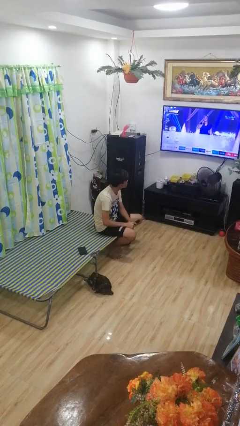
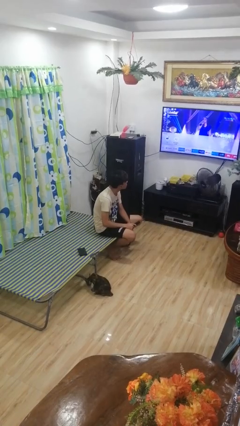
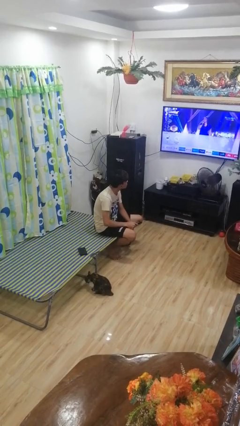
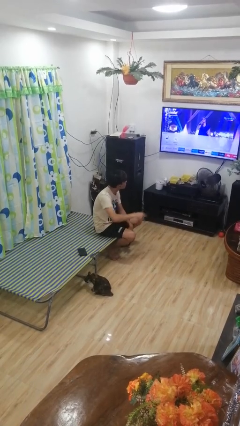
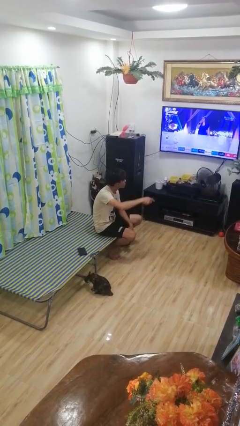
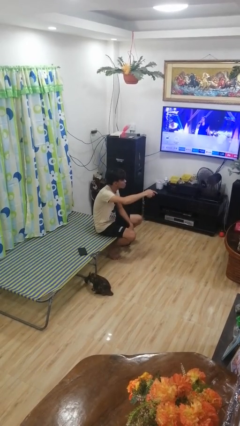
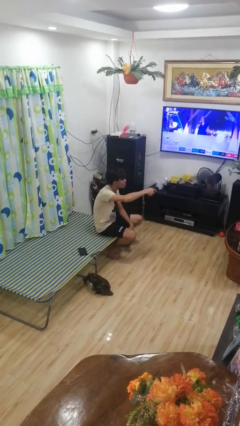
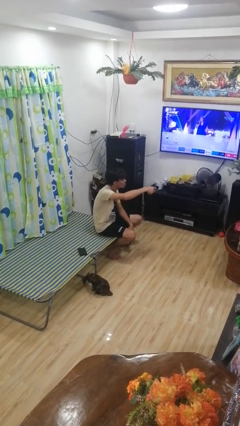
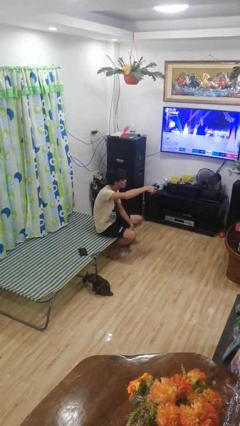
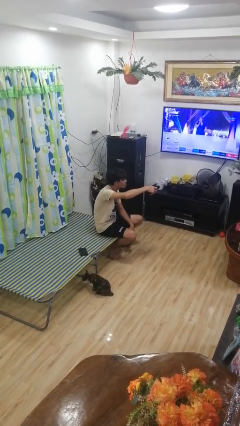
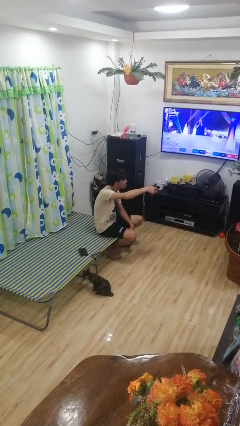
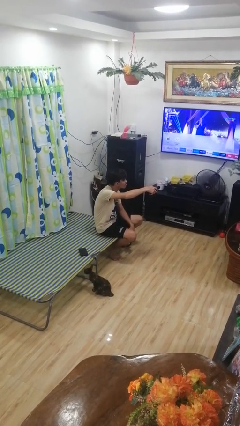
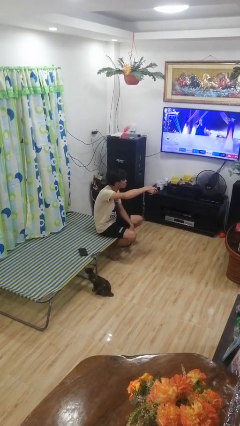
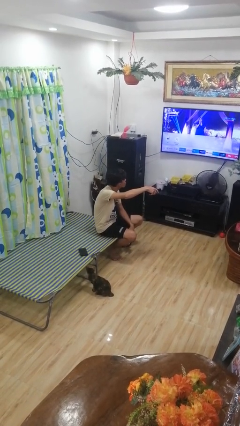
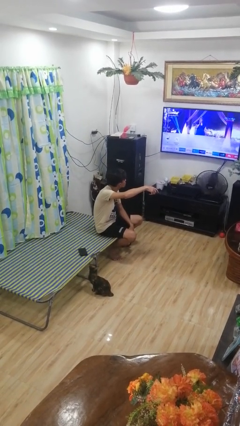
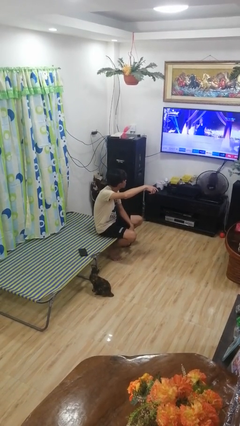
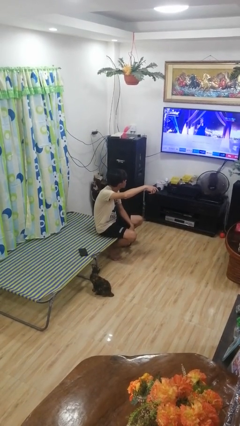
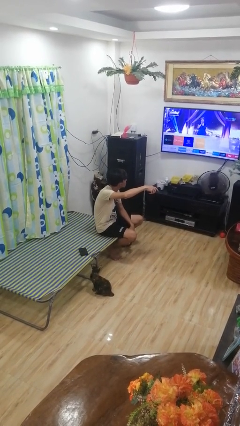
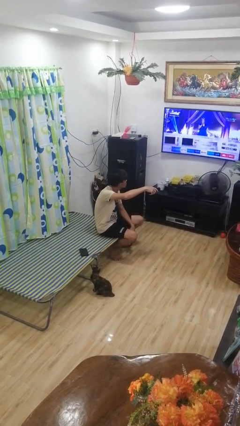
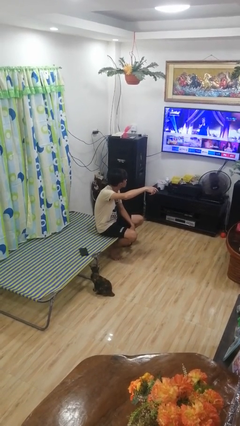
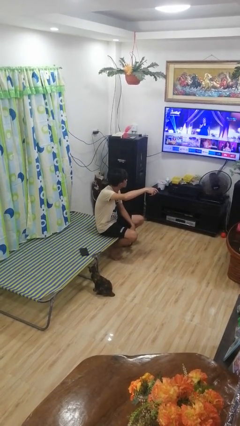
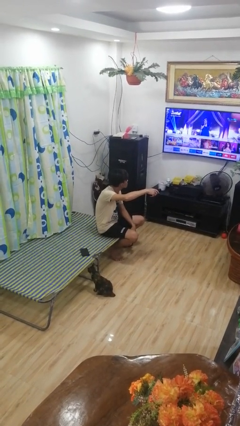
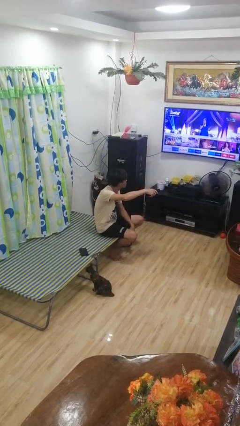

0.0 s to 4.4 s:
person uses television remote

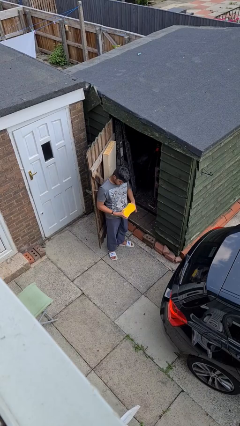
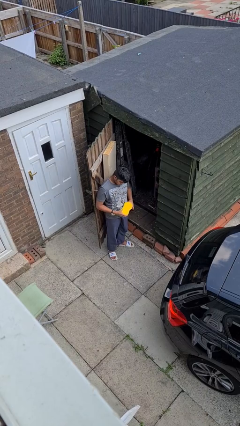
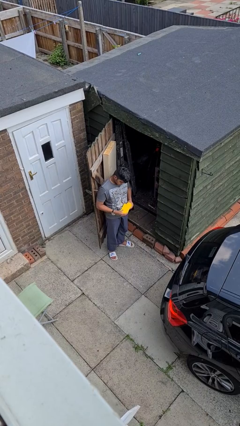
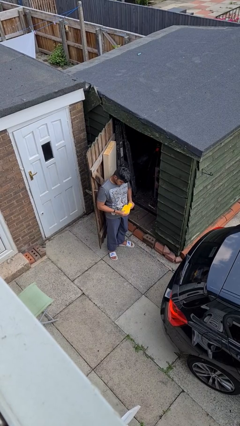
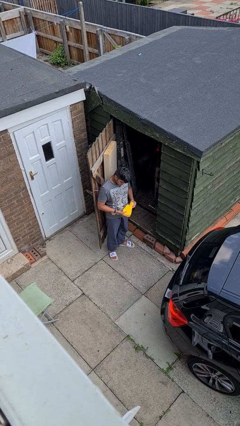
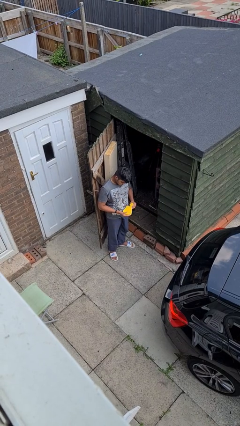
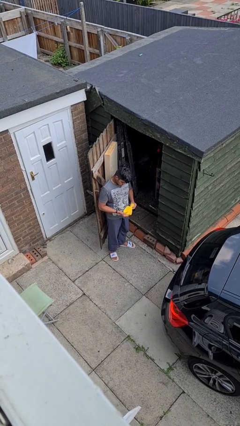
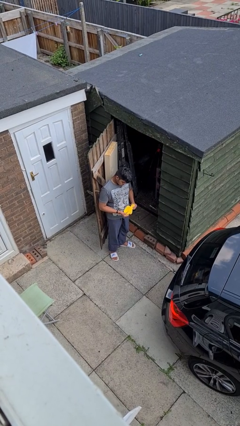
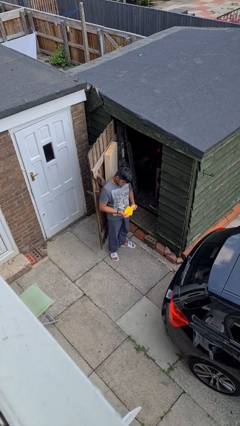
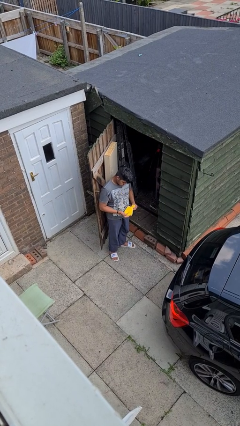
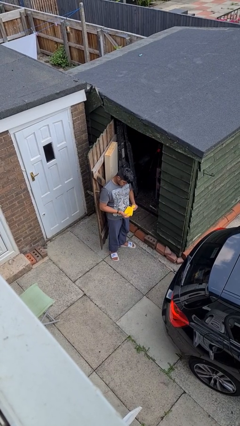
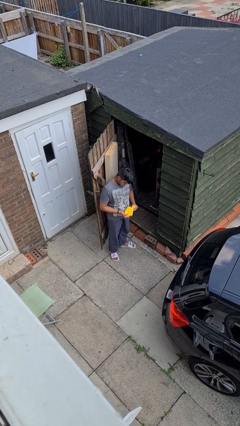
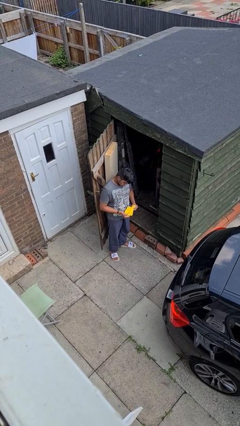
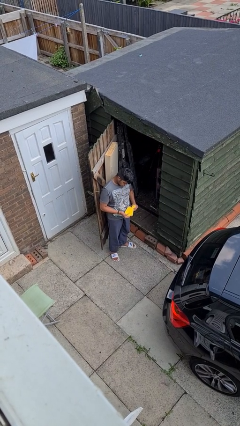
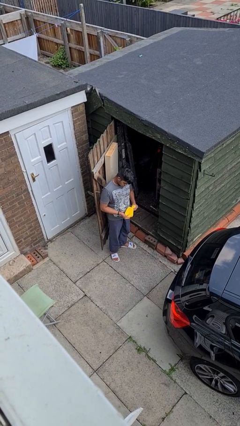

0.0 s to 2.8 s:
person squeezes object

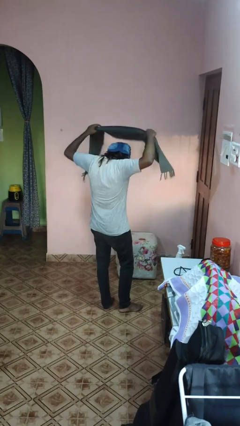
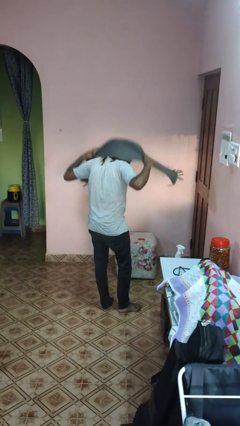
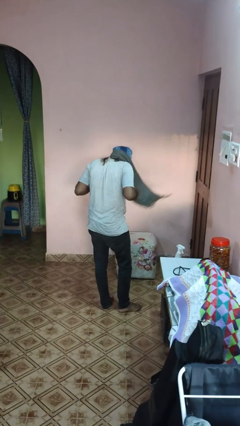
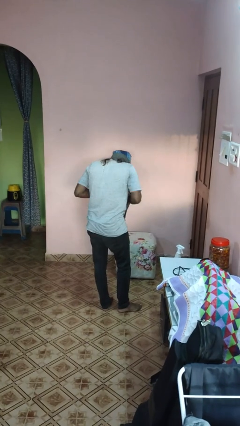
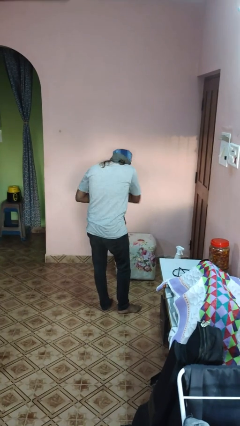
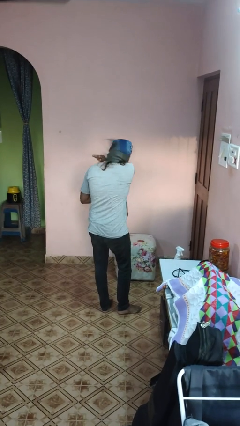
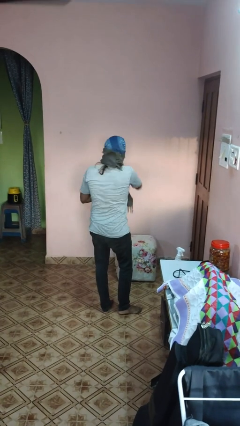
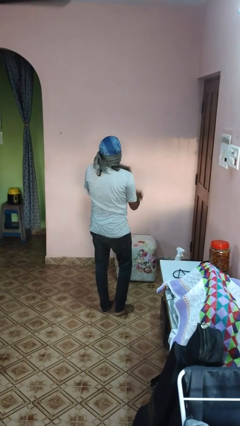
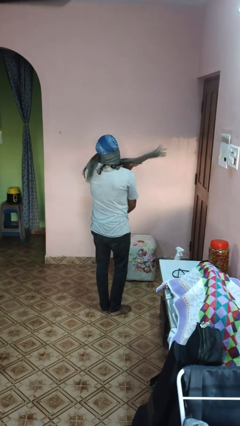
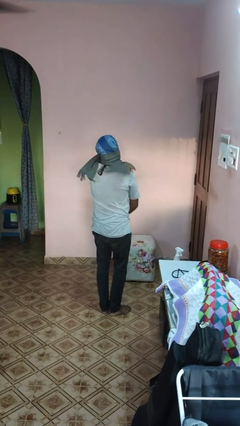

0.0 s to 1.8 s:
person puts on scarf

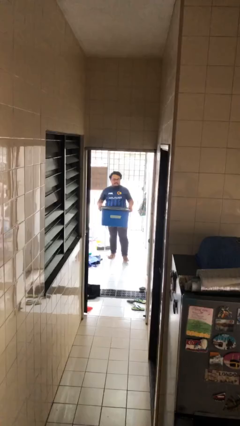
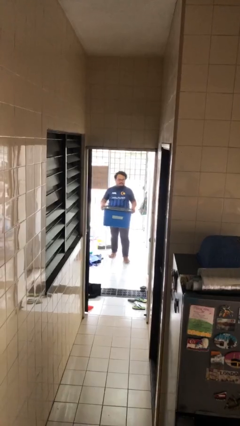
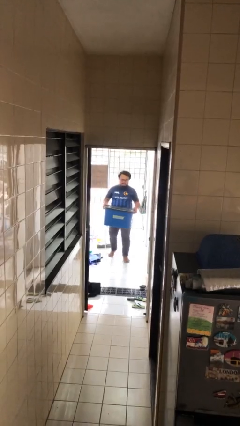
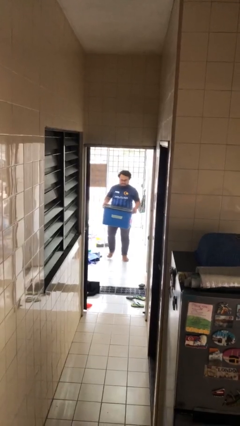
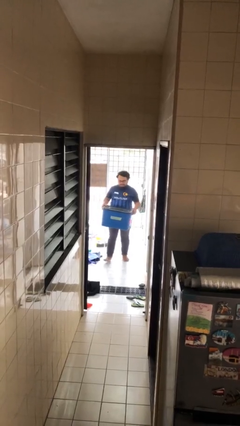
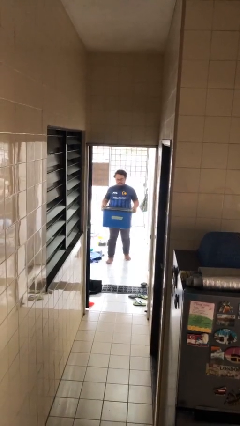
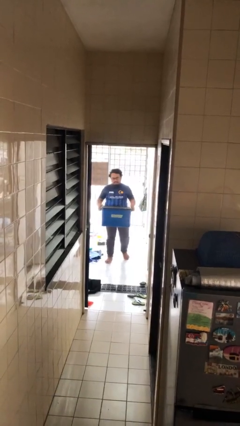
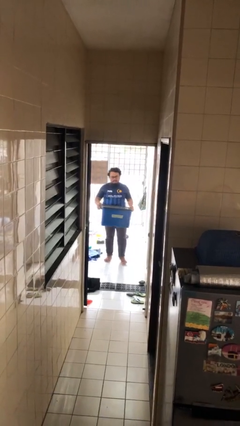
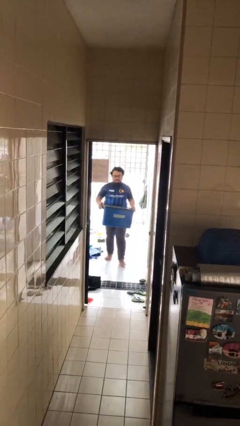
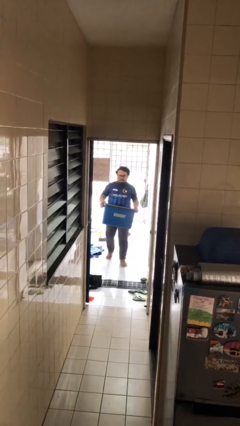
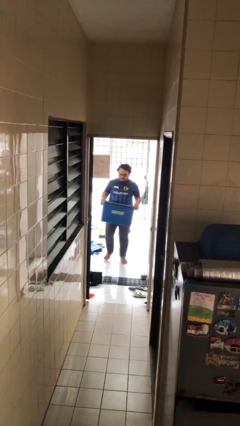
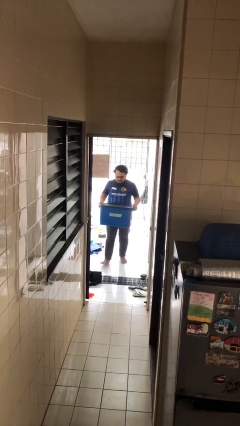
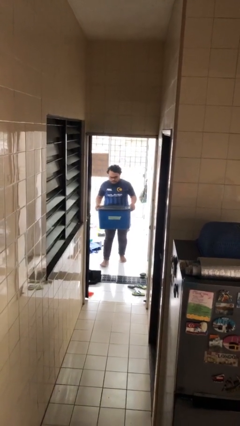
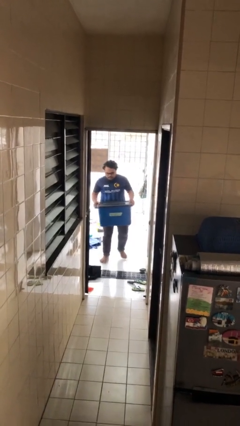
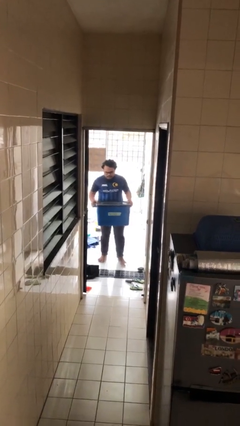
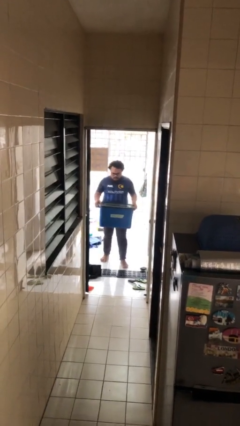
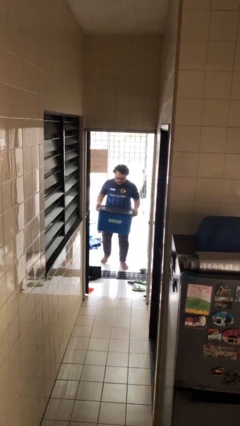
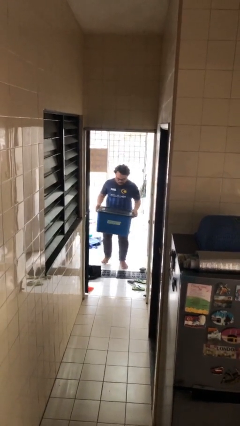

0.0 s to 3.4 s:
person carries heavy object

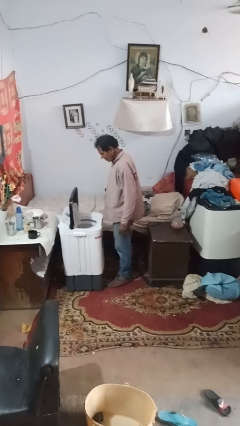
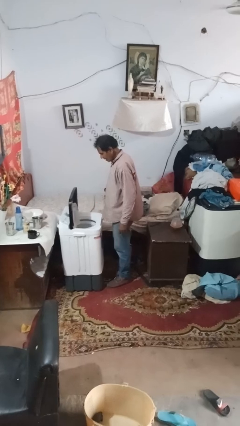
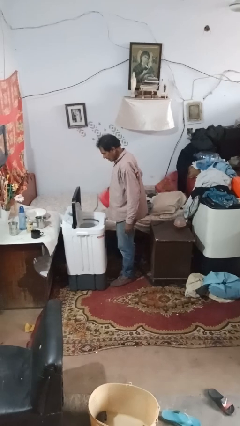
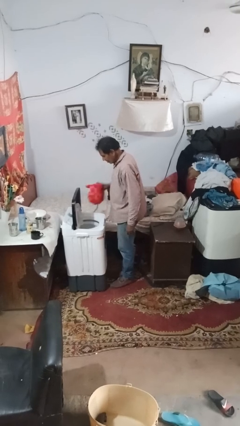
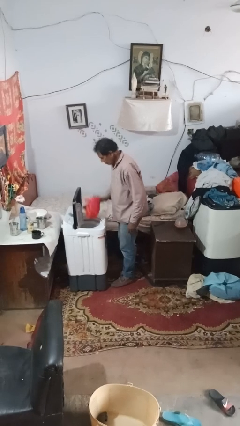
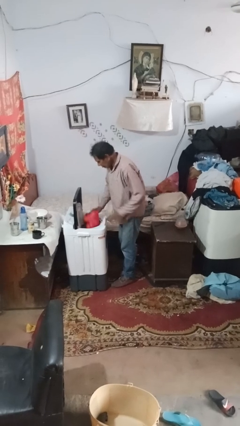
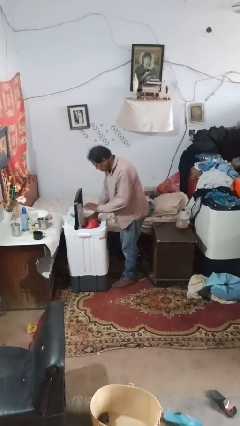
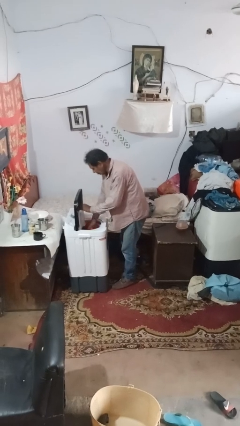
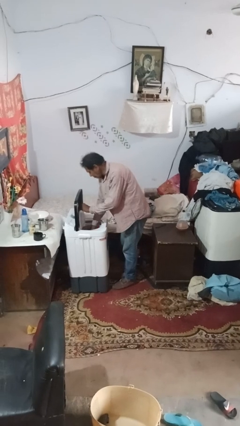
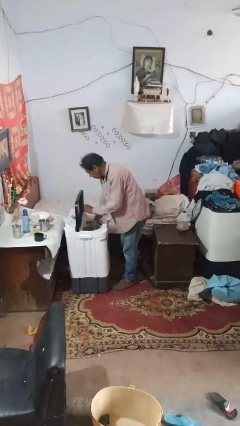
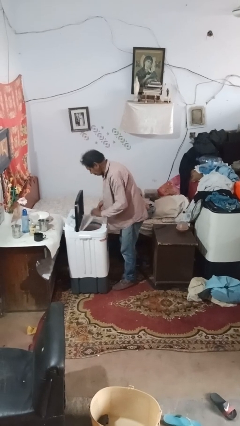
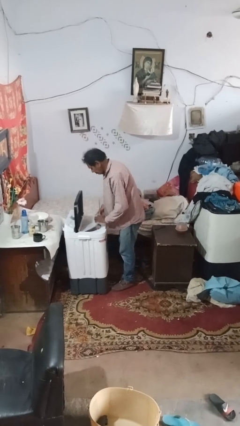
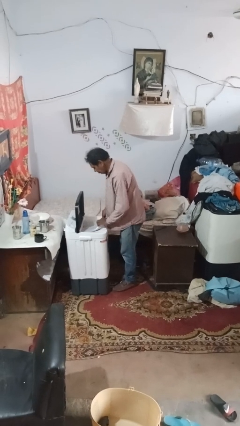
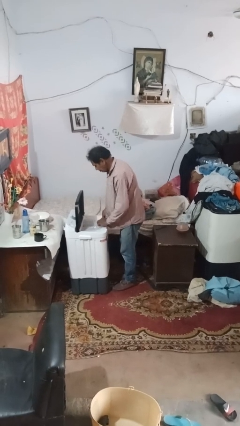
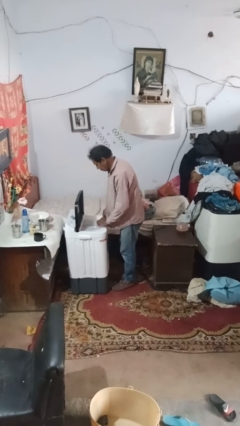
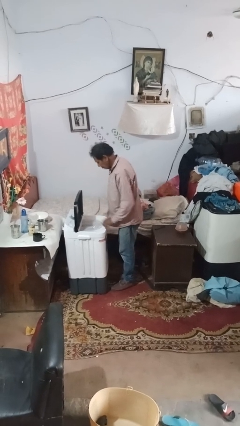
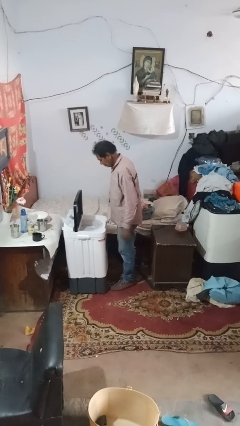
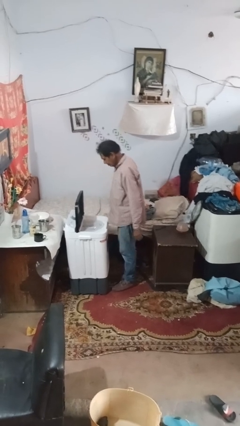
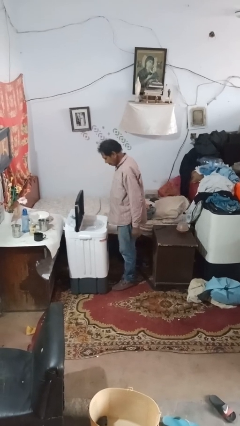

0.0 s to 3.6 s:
person loads dryer

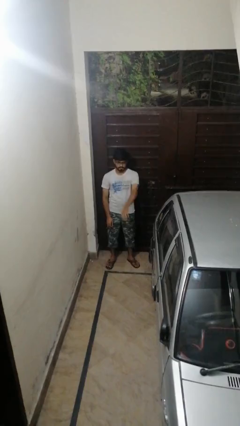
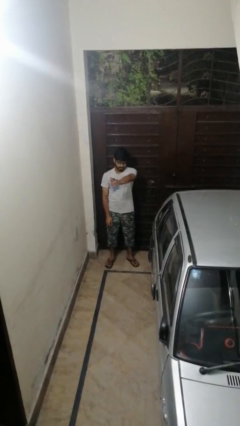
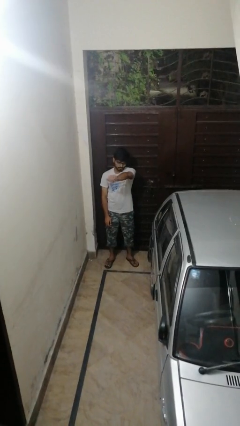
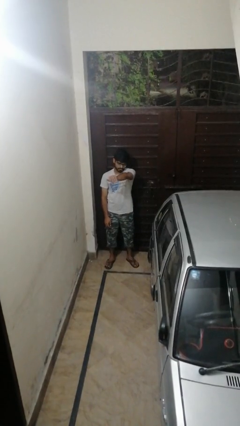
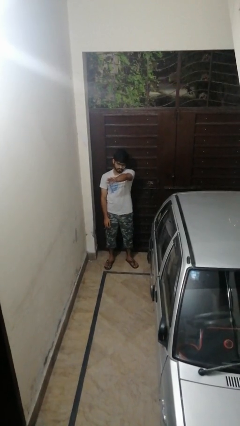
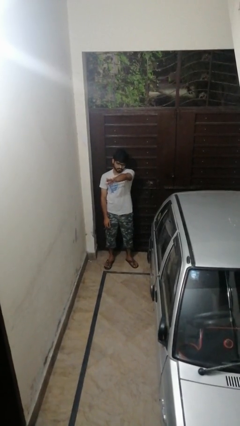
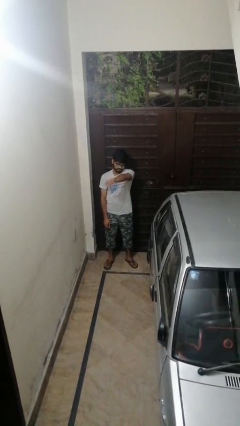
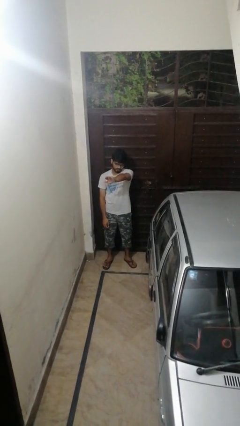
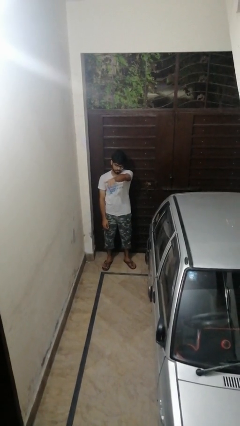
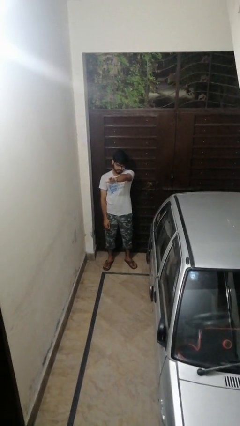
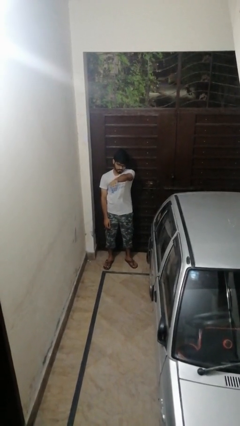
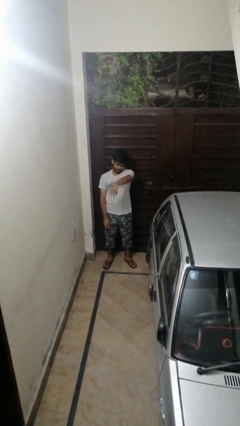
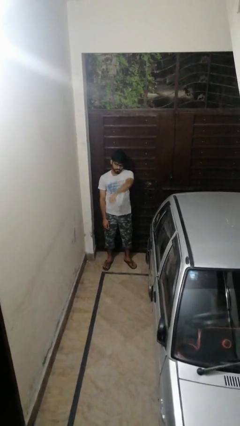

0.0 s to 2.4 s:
person gestures come here
